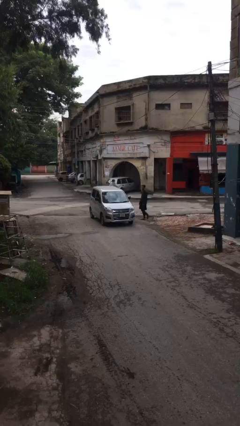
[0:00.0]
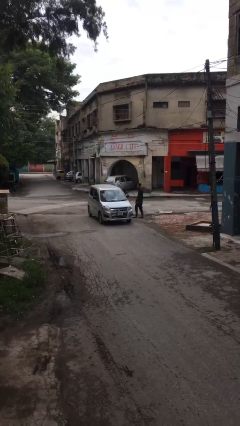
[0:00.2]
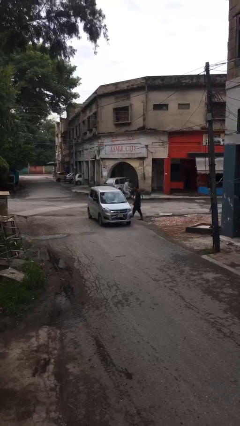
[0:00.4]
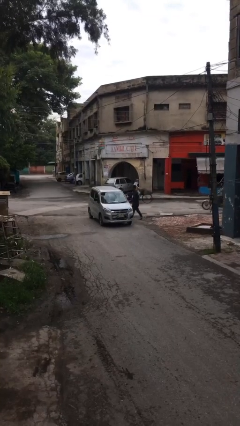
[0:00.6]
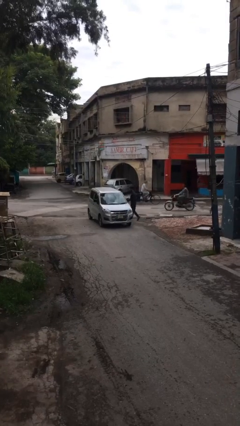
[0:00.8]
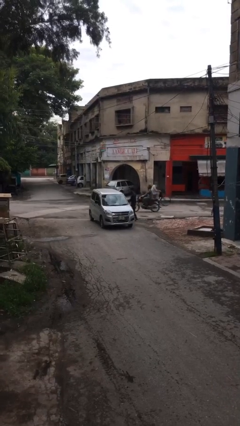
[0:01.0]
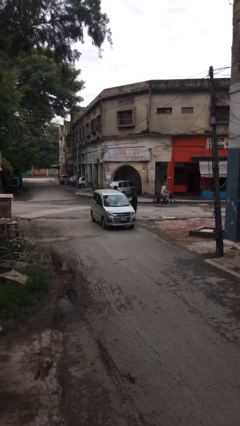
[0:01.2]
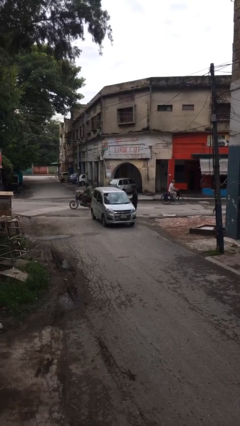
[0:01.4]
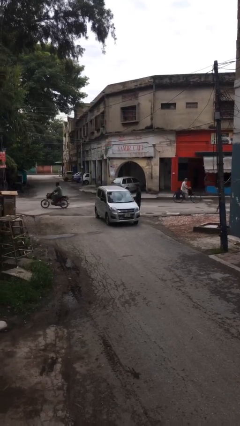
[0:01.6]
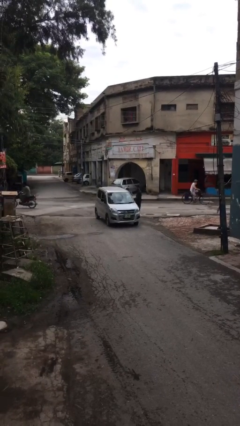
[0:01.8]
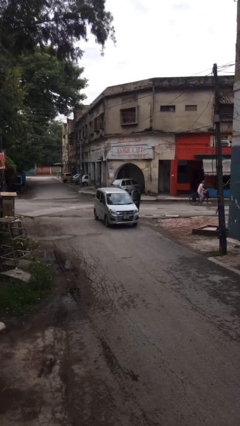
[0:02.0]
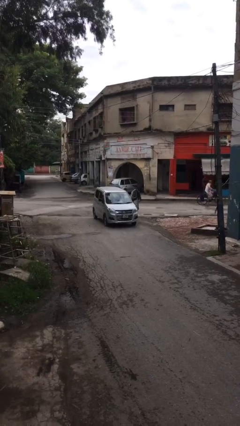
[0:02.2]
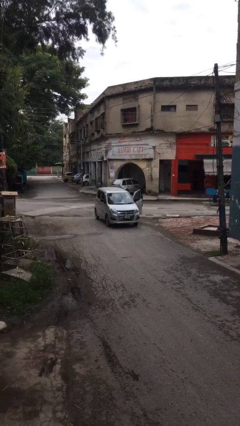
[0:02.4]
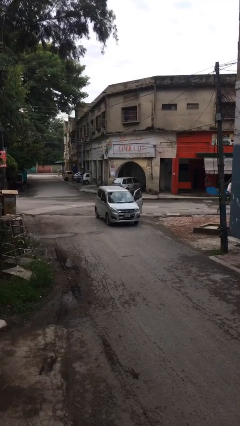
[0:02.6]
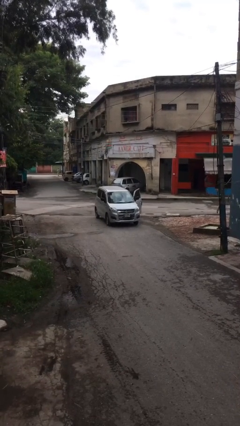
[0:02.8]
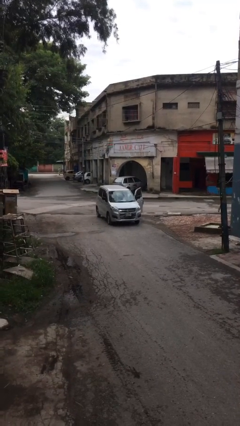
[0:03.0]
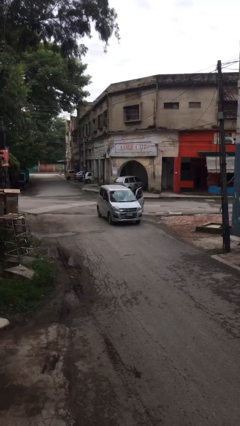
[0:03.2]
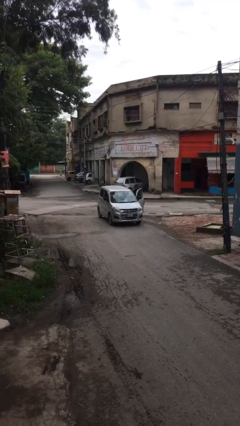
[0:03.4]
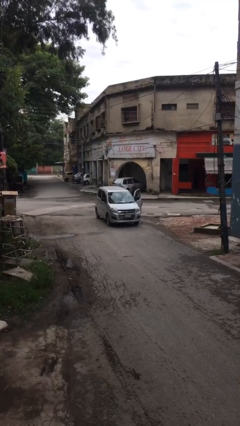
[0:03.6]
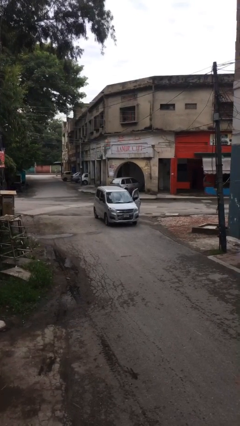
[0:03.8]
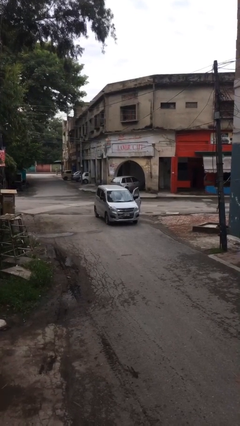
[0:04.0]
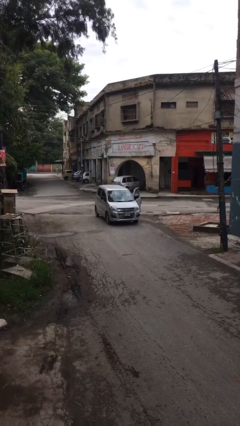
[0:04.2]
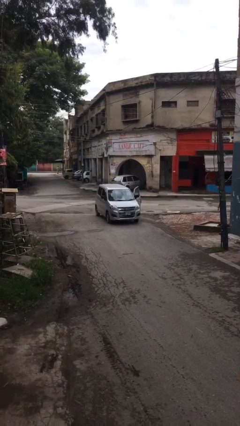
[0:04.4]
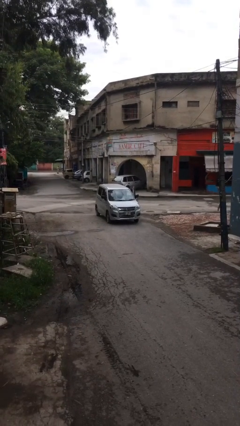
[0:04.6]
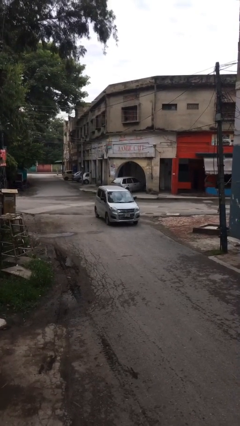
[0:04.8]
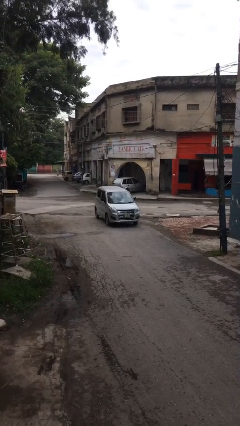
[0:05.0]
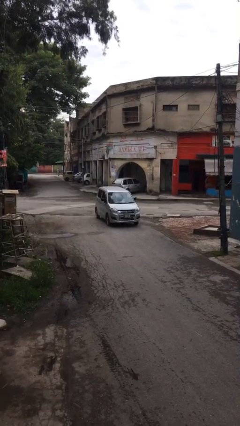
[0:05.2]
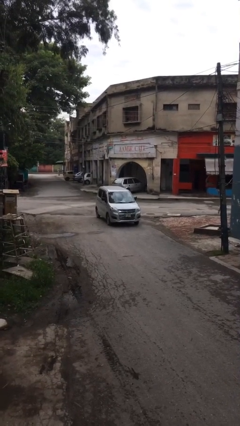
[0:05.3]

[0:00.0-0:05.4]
car picks up person

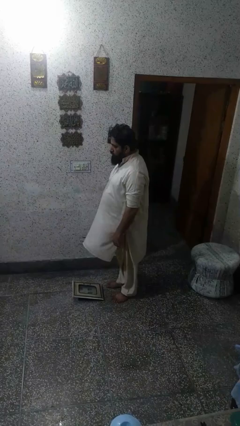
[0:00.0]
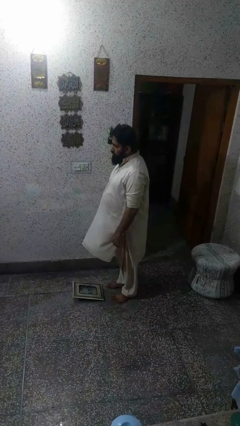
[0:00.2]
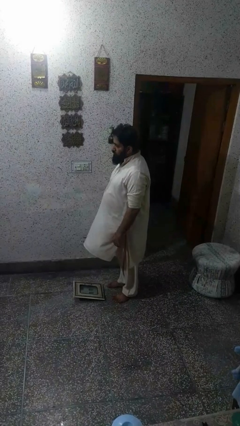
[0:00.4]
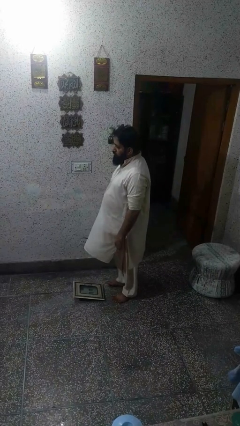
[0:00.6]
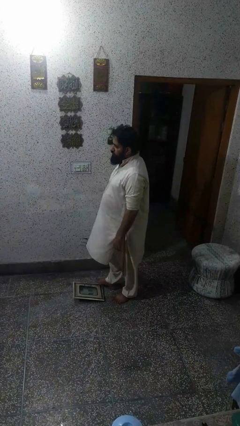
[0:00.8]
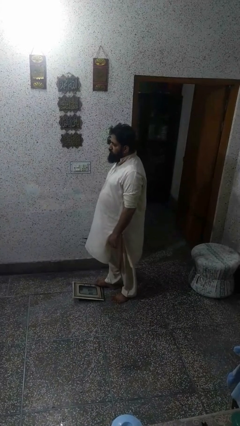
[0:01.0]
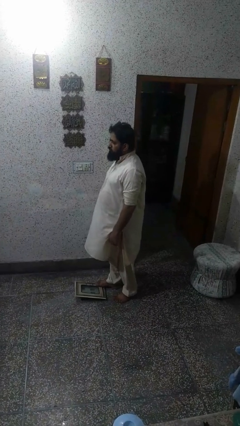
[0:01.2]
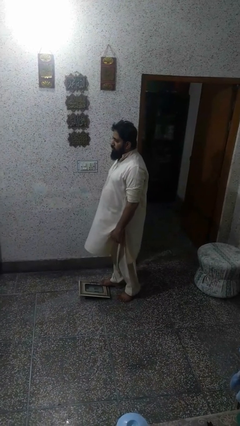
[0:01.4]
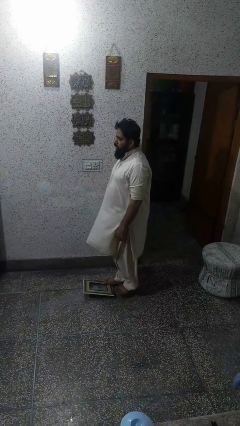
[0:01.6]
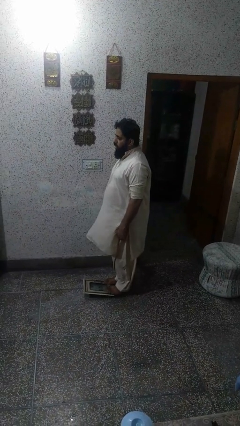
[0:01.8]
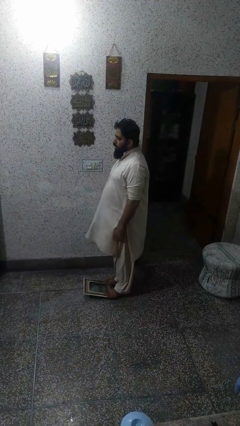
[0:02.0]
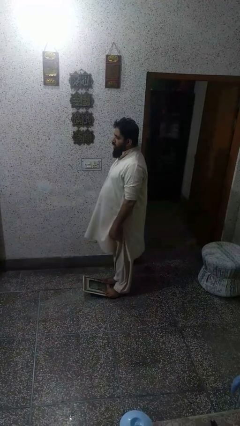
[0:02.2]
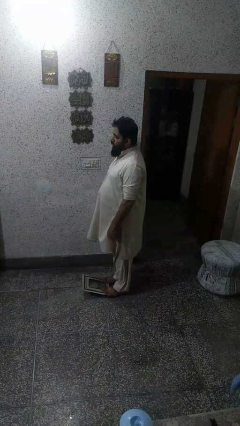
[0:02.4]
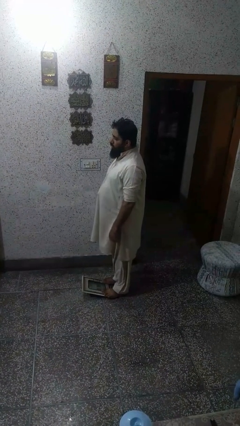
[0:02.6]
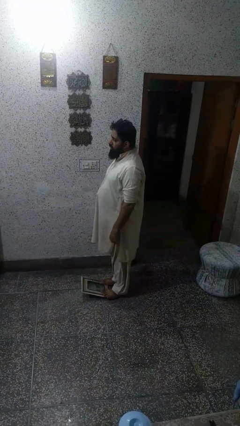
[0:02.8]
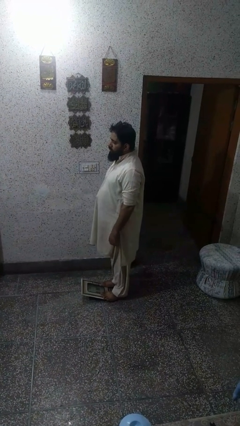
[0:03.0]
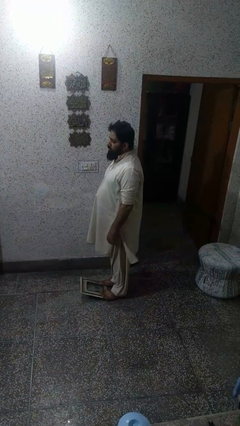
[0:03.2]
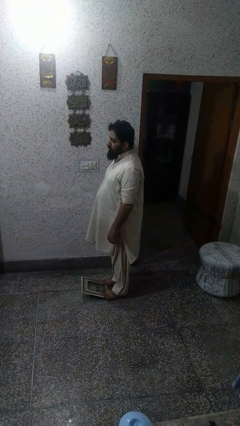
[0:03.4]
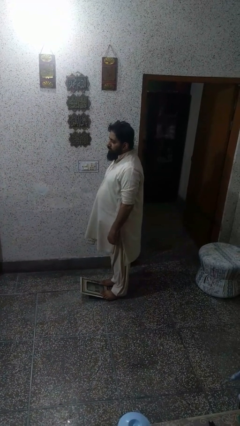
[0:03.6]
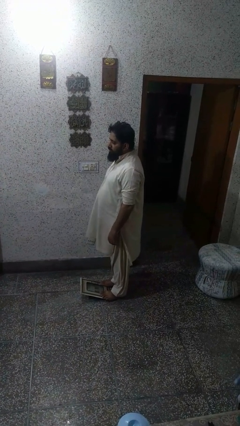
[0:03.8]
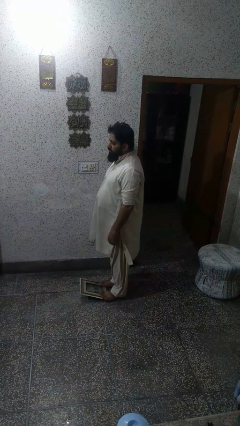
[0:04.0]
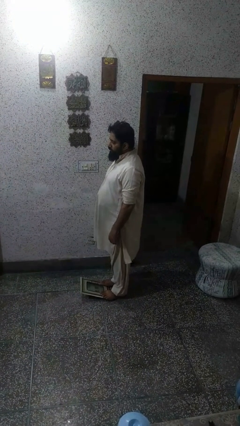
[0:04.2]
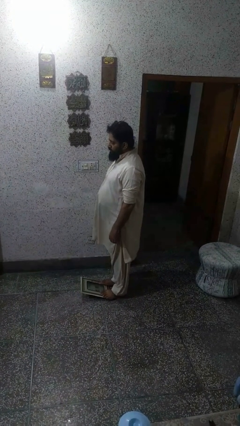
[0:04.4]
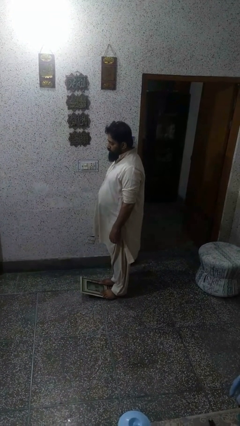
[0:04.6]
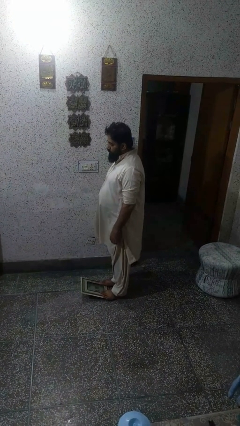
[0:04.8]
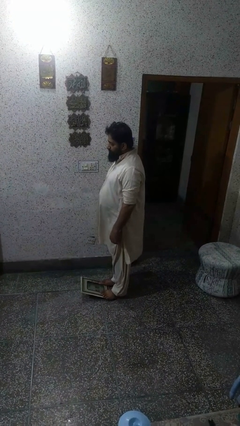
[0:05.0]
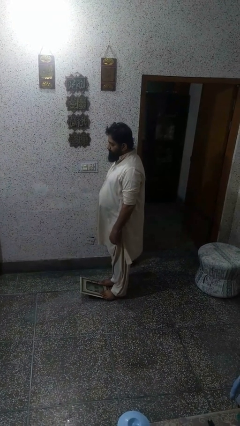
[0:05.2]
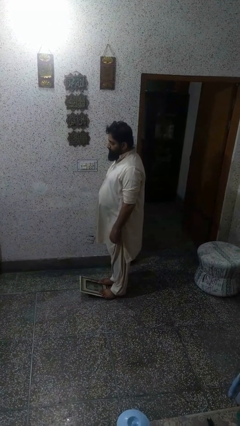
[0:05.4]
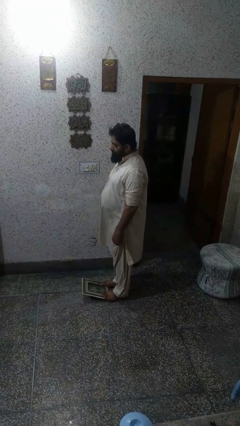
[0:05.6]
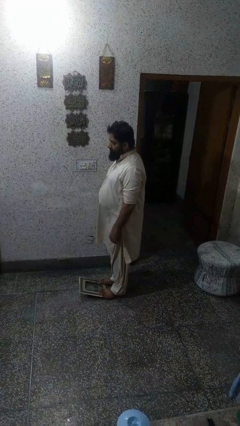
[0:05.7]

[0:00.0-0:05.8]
person uses bodyweight scale

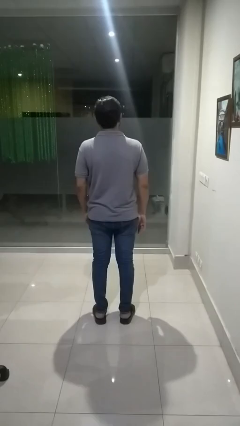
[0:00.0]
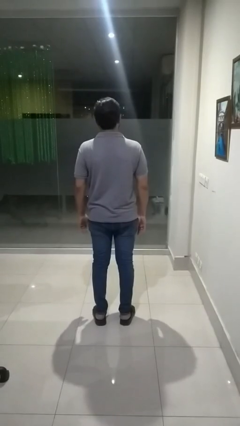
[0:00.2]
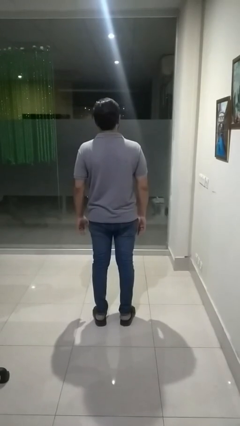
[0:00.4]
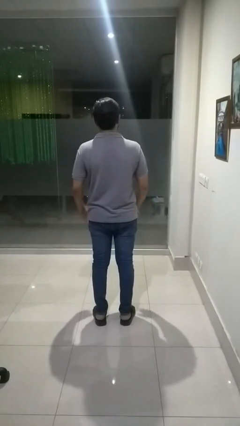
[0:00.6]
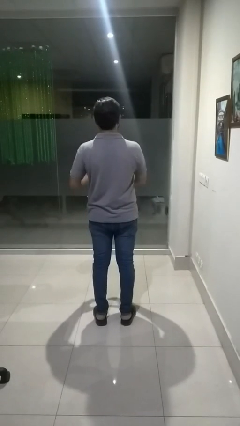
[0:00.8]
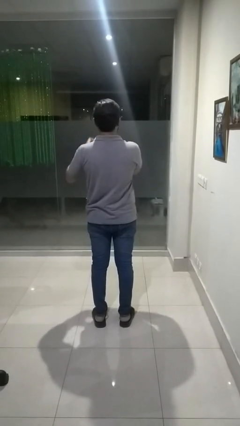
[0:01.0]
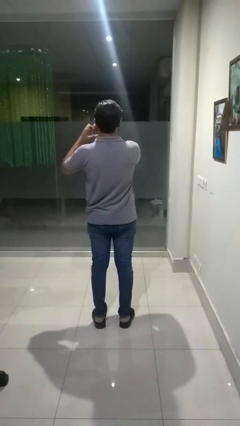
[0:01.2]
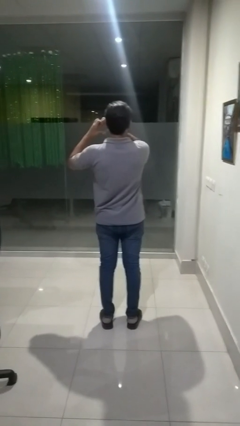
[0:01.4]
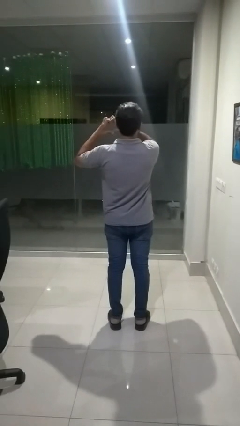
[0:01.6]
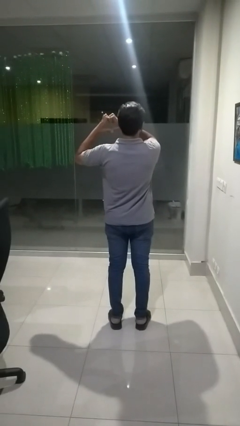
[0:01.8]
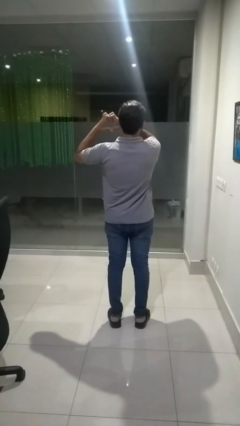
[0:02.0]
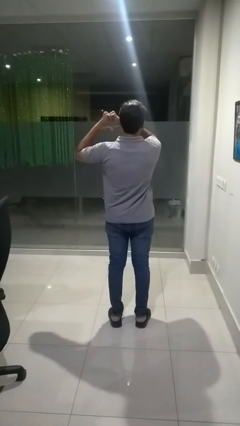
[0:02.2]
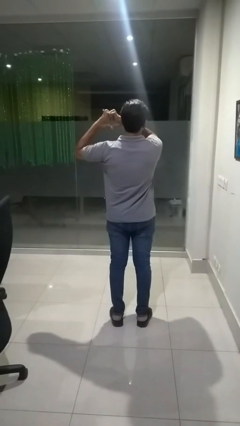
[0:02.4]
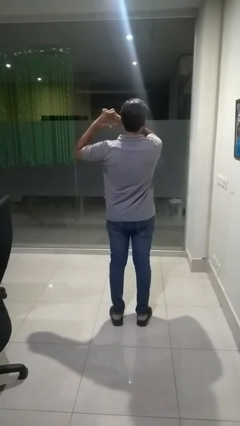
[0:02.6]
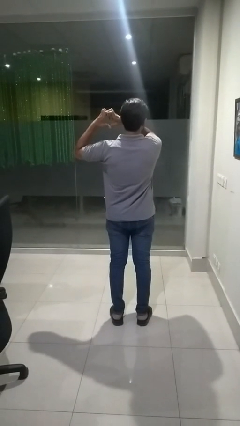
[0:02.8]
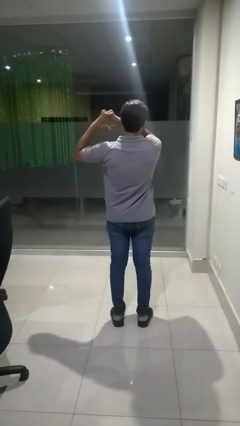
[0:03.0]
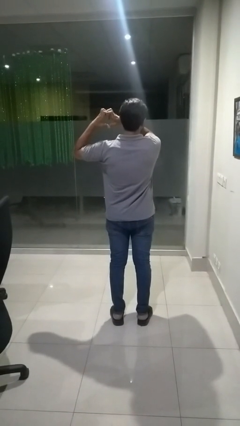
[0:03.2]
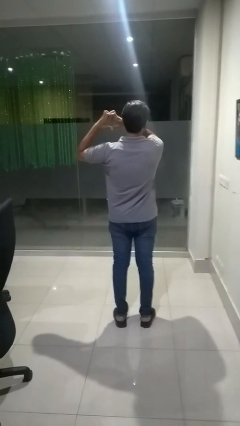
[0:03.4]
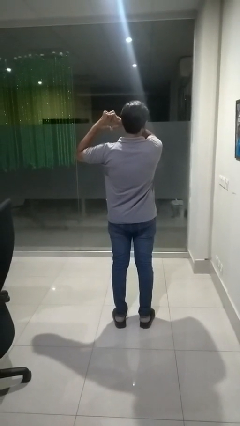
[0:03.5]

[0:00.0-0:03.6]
person gestures heart

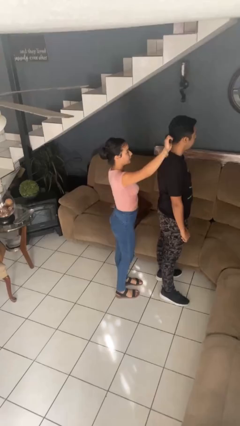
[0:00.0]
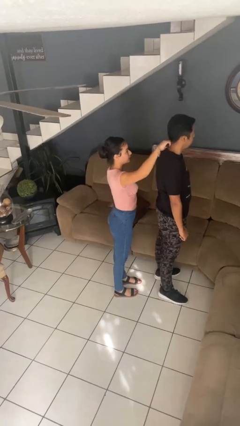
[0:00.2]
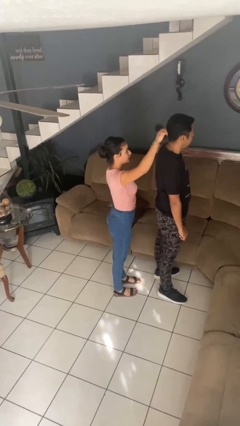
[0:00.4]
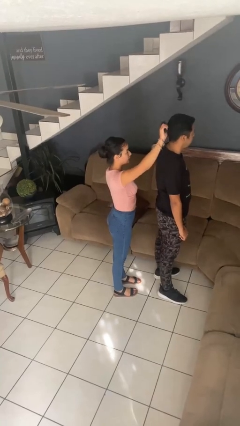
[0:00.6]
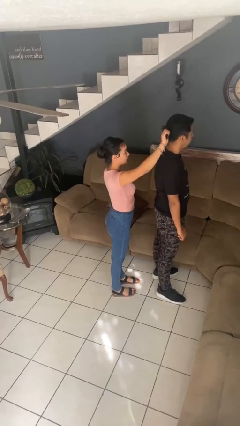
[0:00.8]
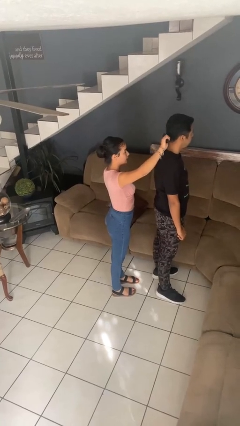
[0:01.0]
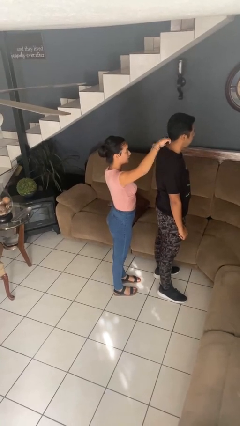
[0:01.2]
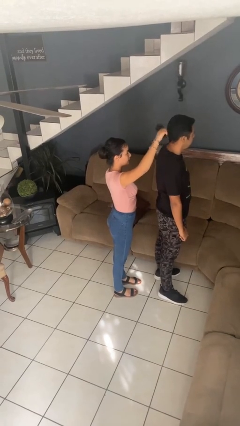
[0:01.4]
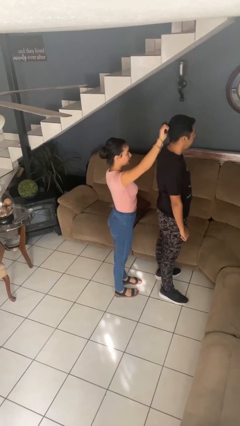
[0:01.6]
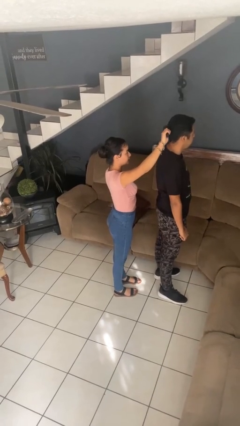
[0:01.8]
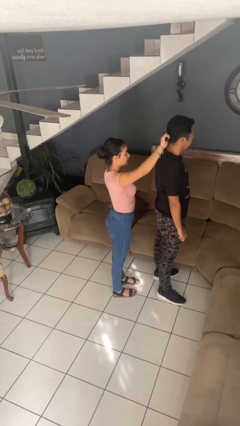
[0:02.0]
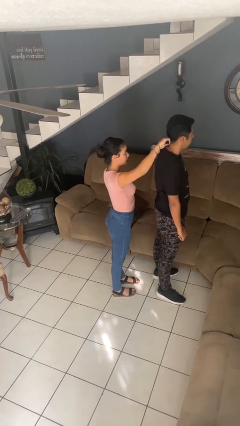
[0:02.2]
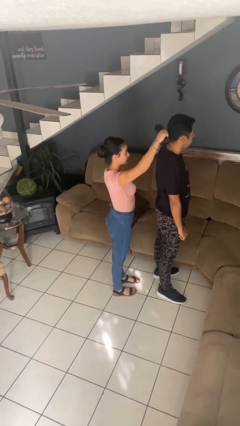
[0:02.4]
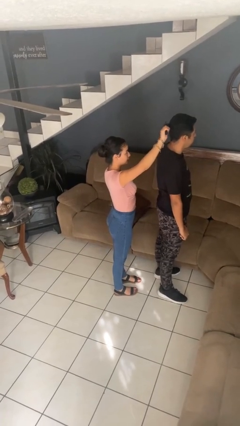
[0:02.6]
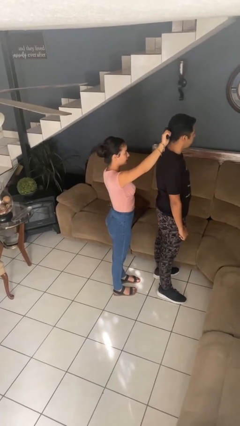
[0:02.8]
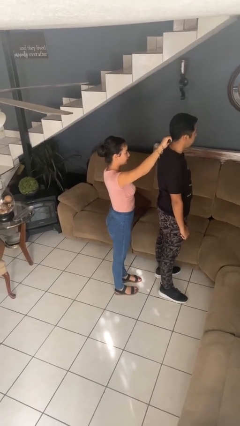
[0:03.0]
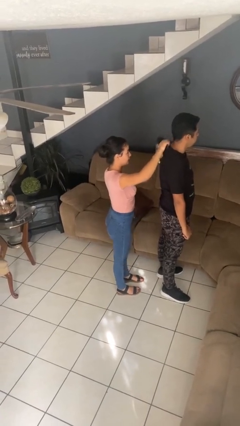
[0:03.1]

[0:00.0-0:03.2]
person brushes hair of person

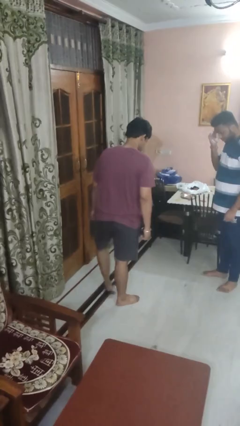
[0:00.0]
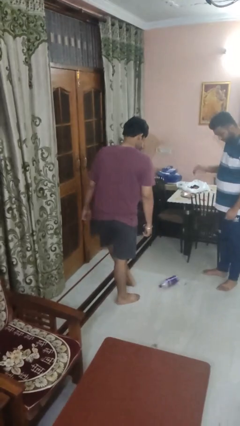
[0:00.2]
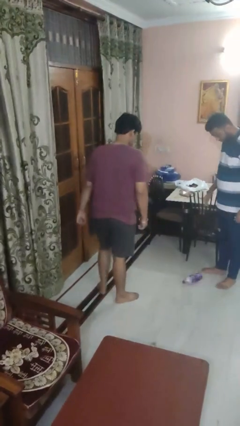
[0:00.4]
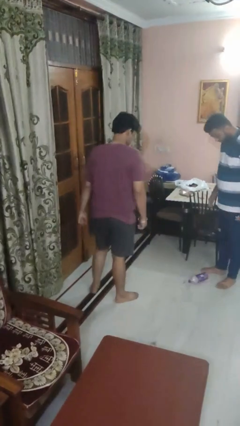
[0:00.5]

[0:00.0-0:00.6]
person kicks object to person
